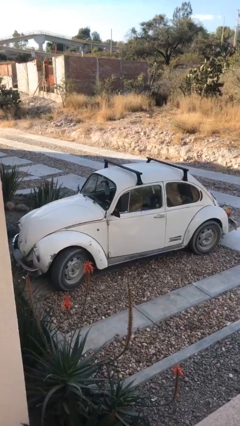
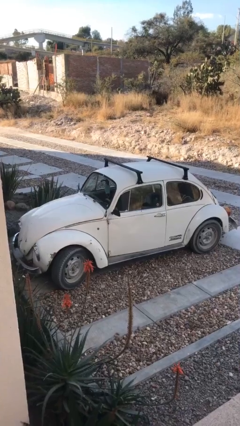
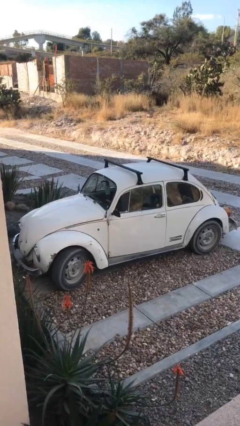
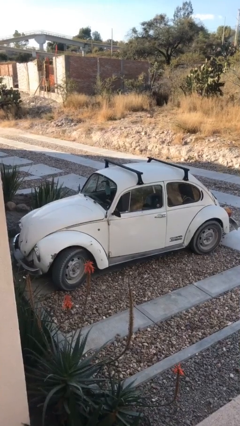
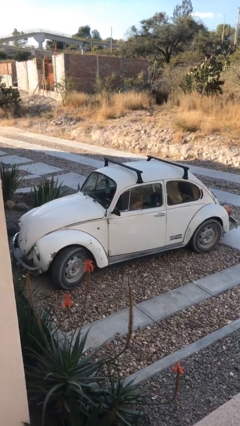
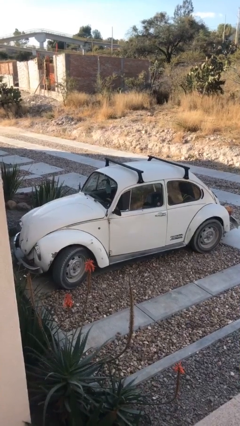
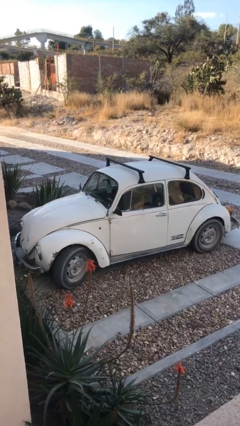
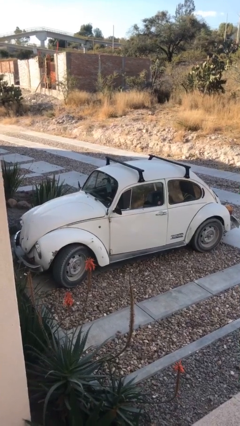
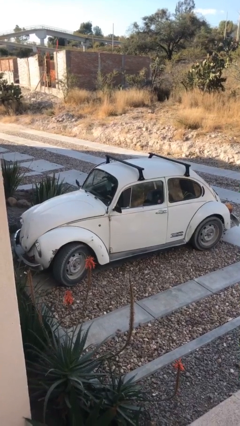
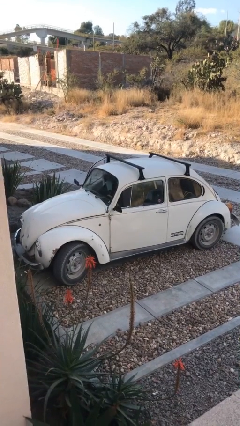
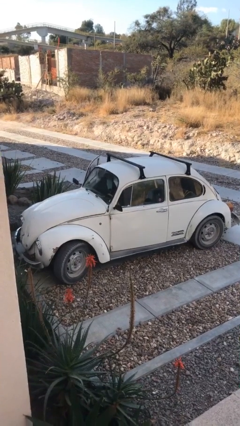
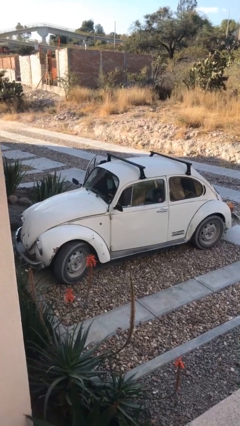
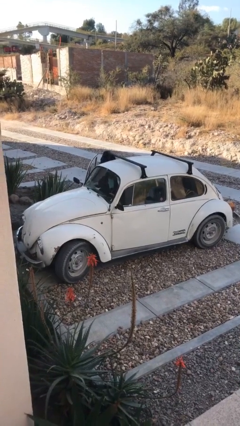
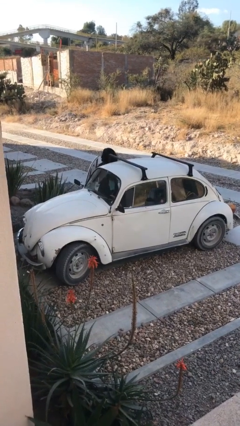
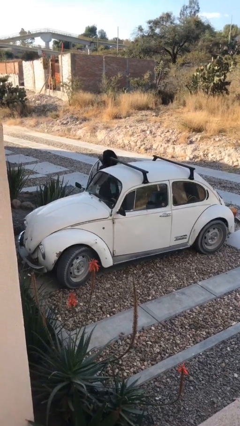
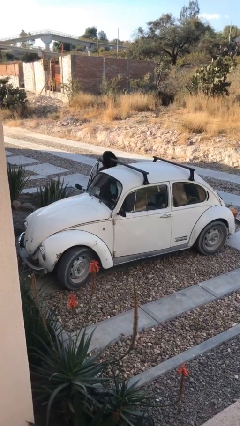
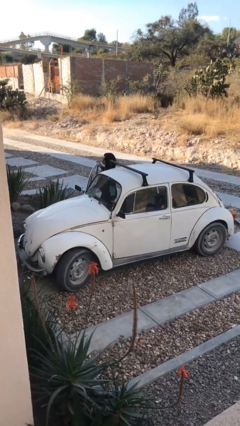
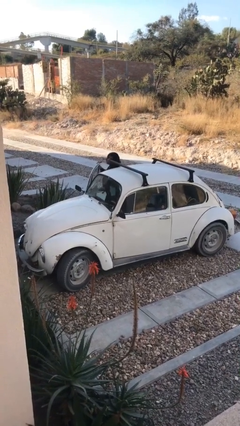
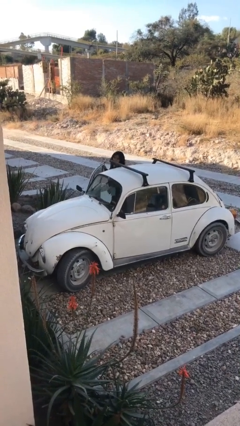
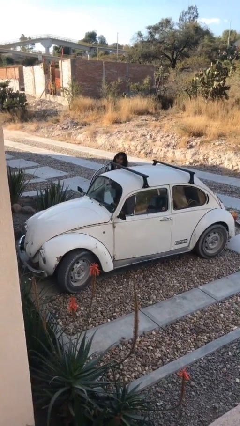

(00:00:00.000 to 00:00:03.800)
car drops off person

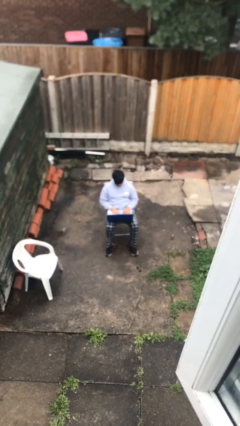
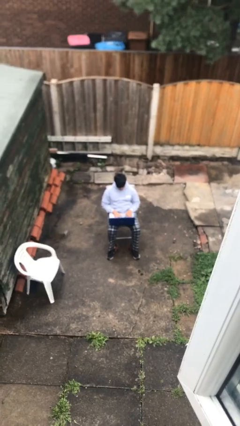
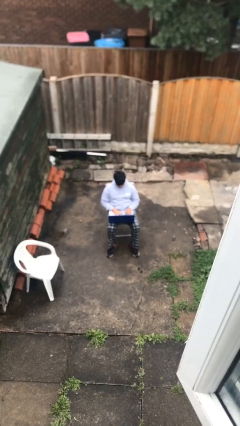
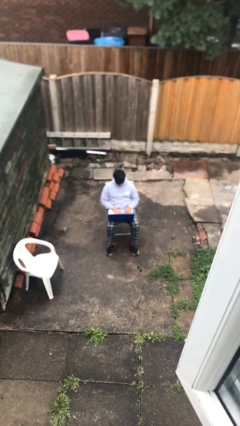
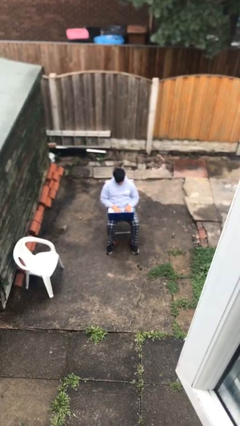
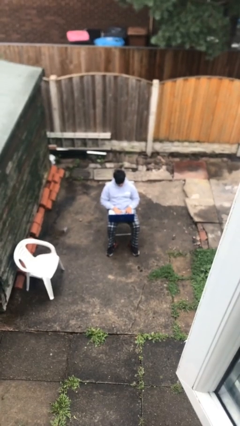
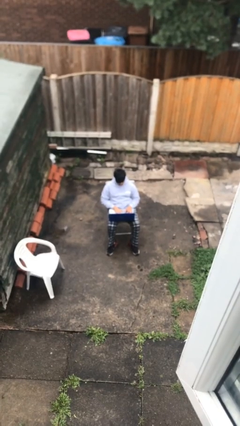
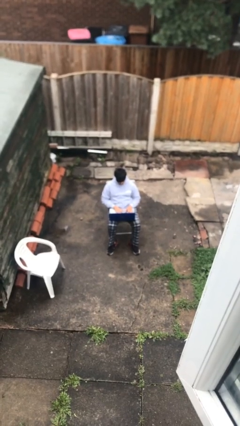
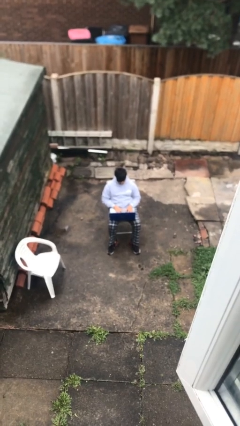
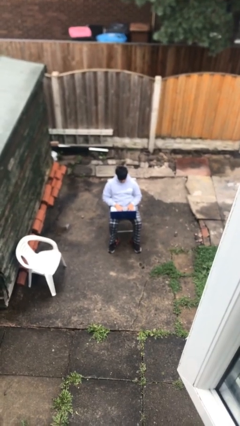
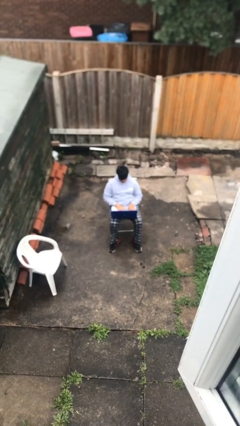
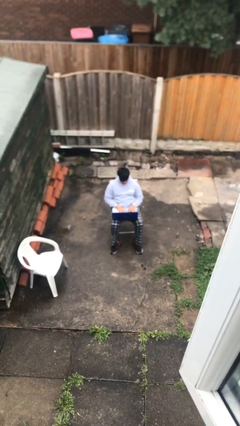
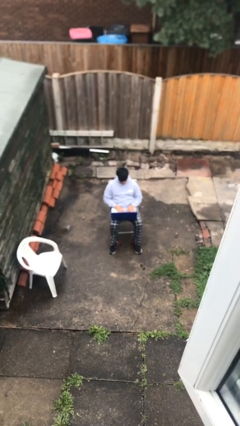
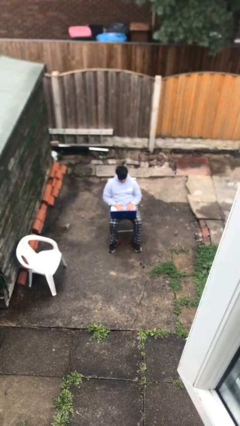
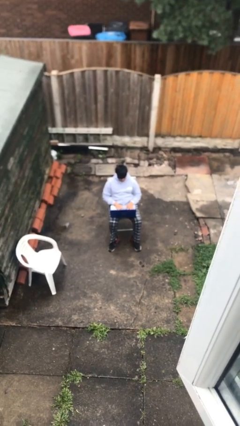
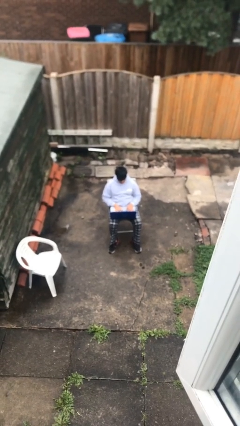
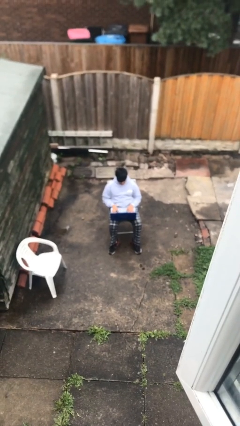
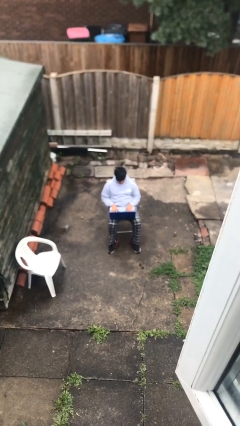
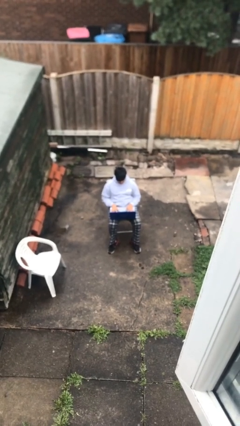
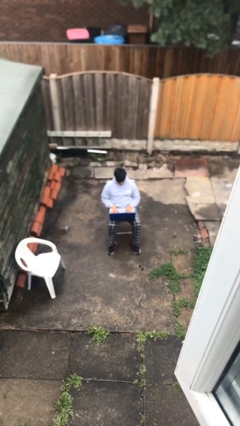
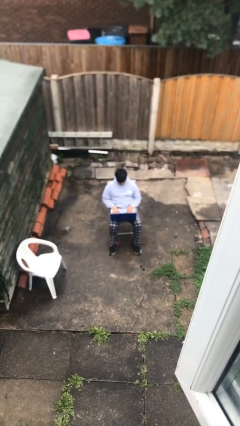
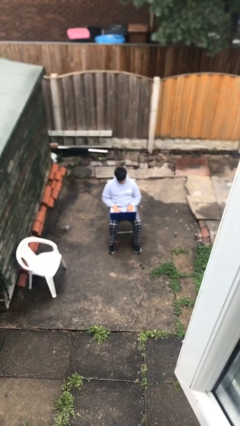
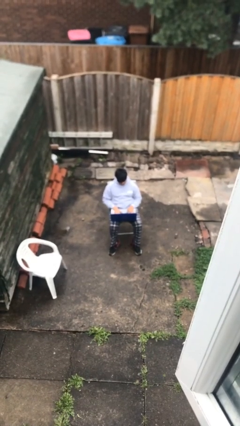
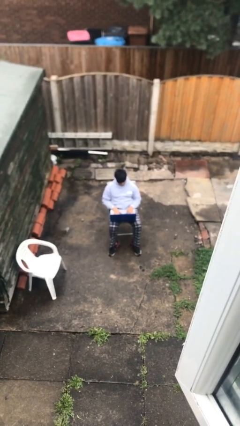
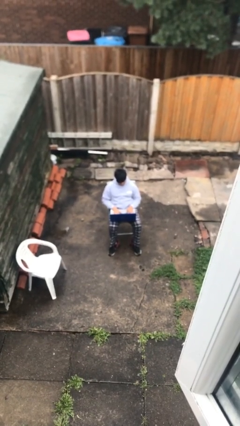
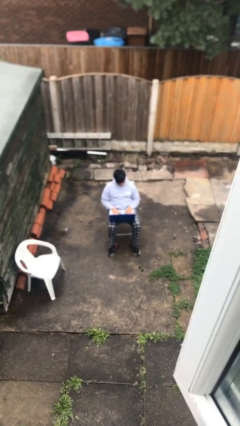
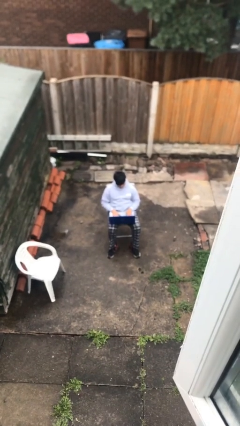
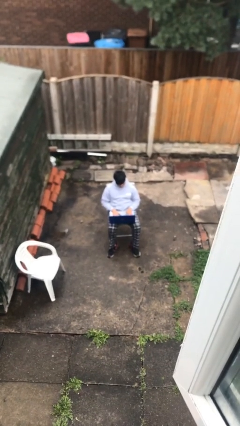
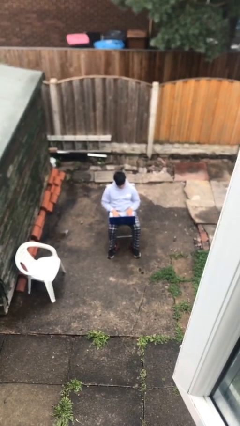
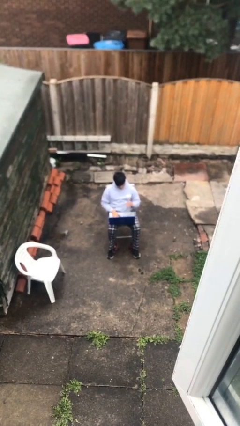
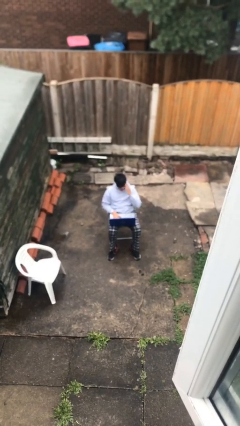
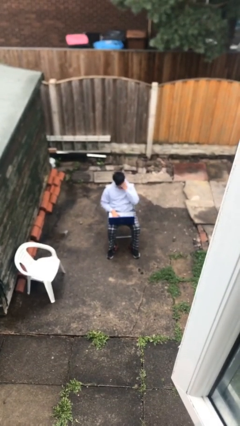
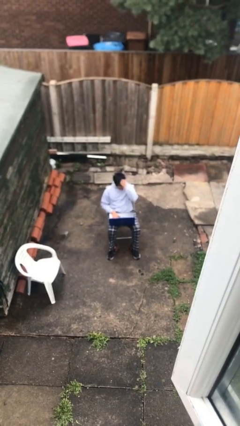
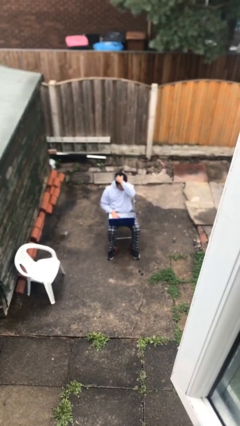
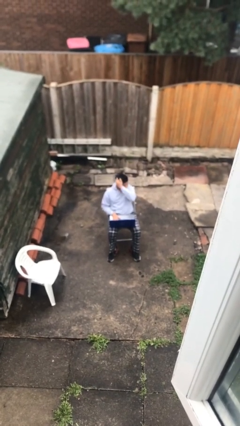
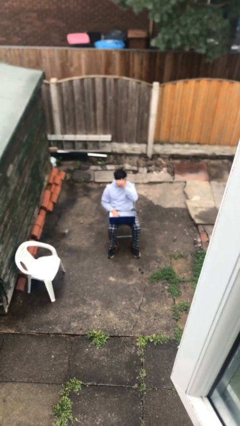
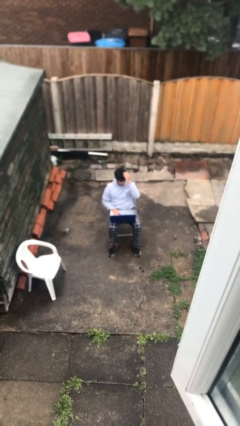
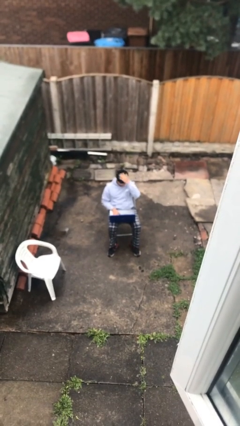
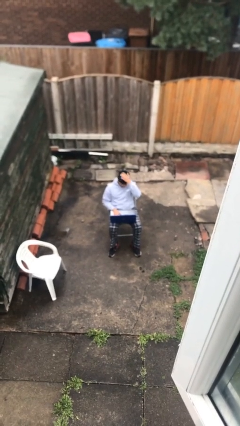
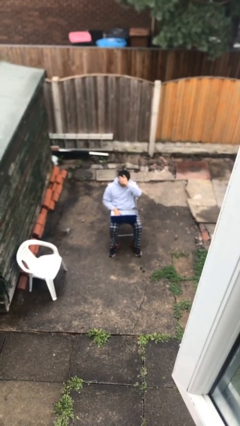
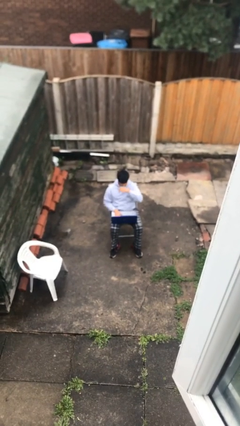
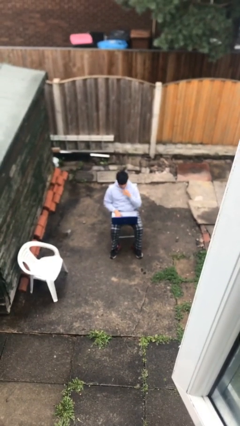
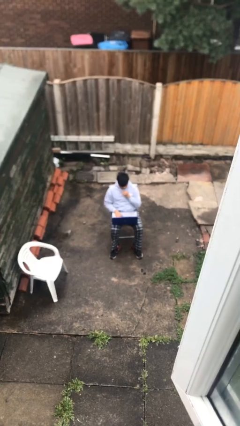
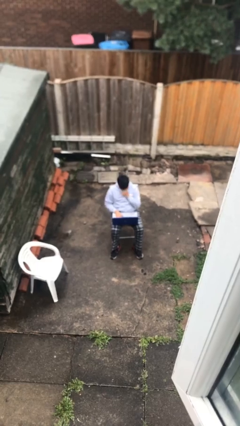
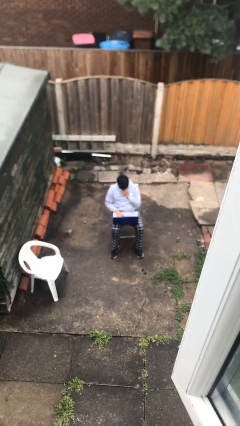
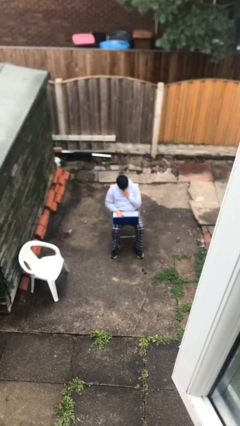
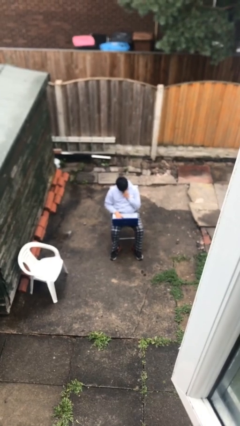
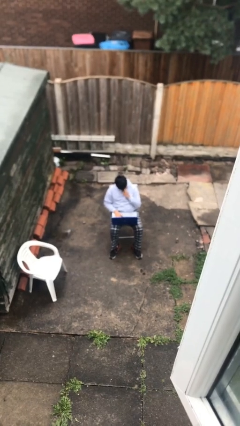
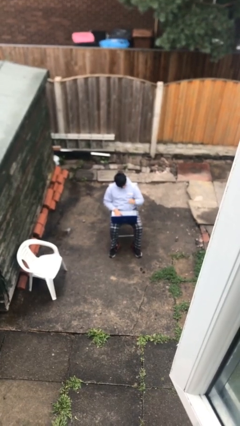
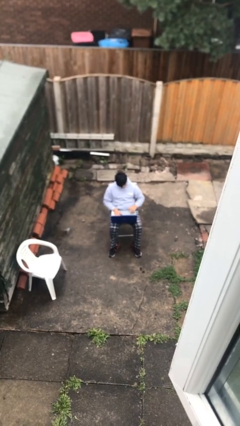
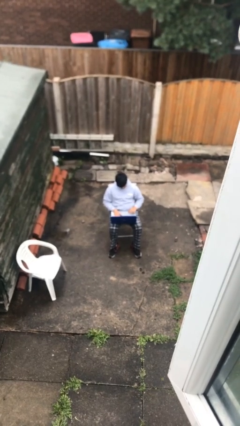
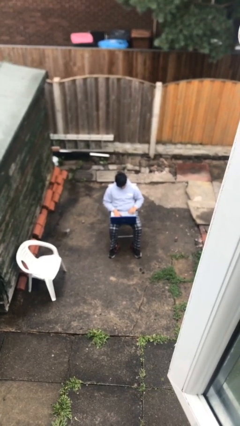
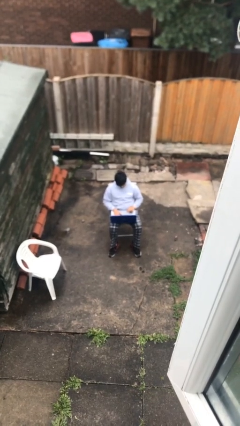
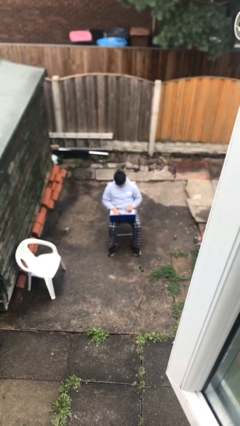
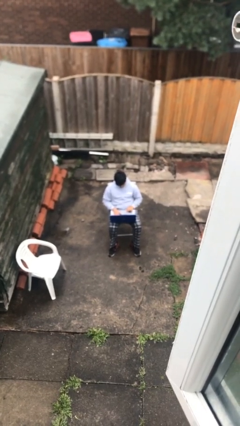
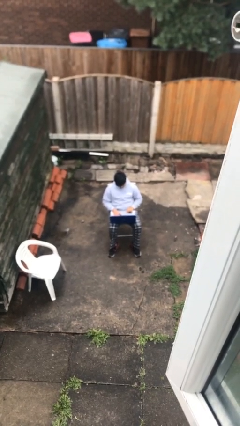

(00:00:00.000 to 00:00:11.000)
person interacts with laptop

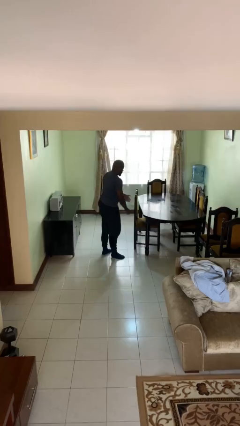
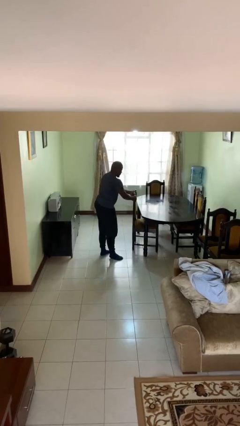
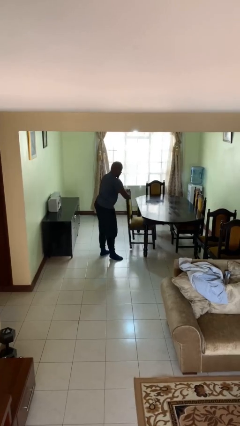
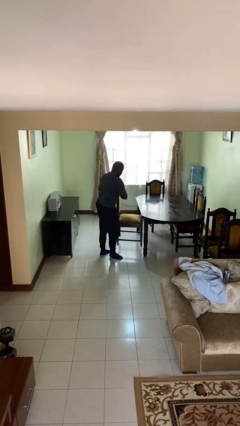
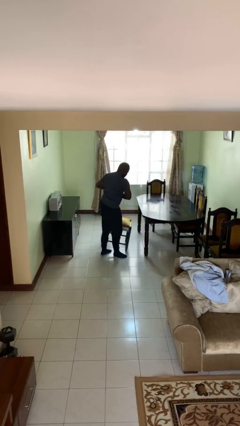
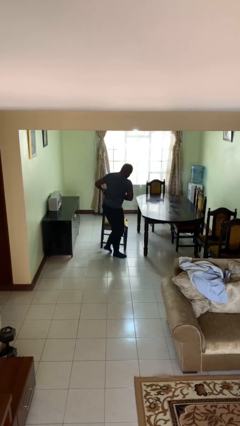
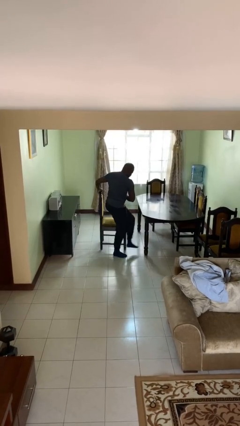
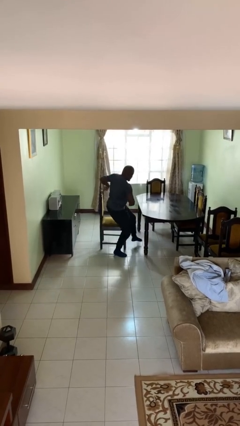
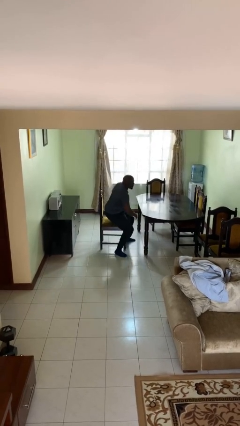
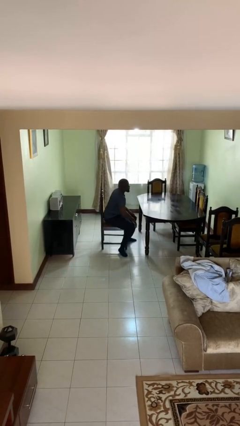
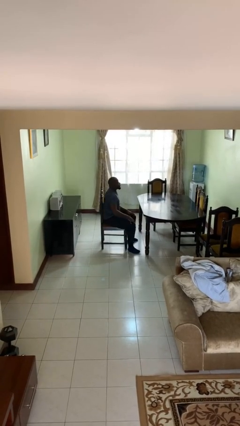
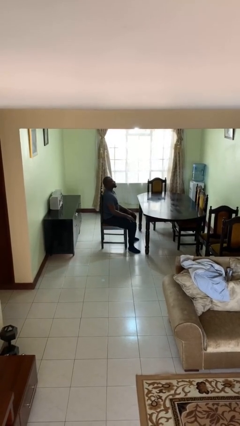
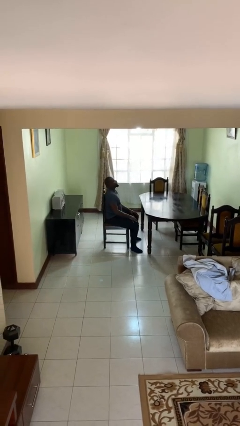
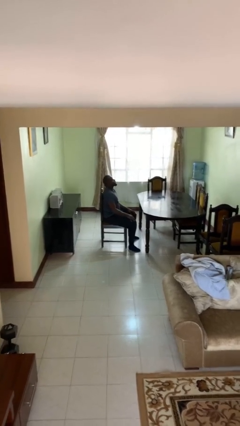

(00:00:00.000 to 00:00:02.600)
person sits down

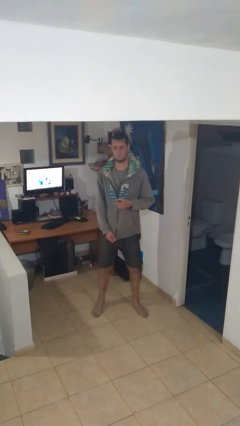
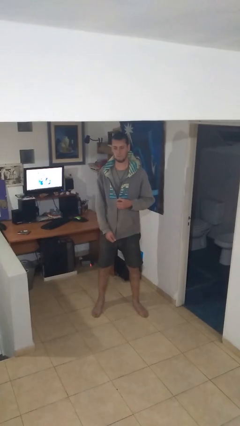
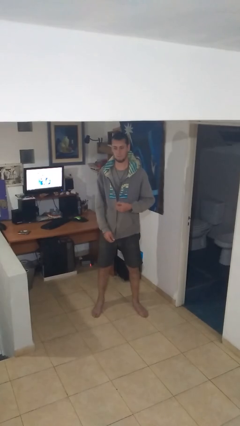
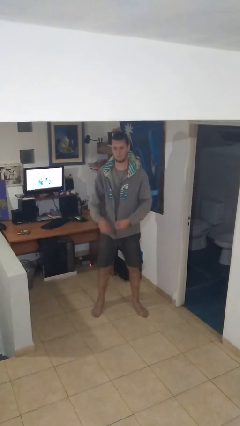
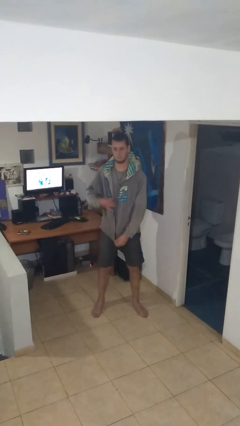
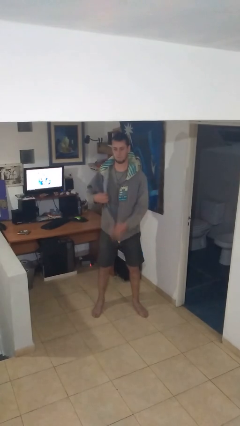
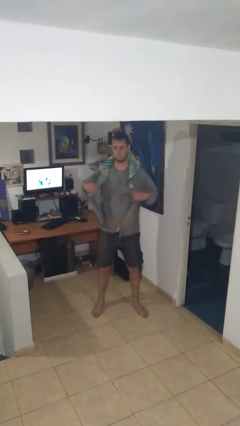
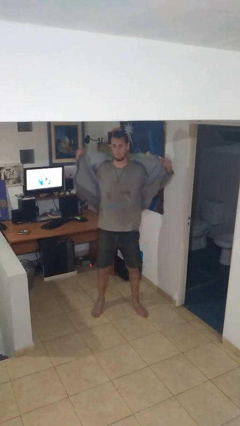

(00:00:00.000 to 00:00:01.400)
person unzips jacket
